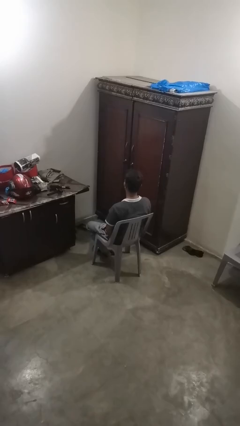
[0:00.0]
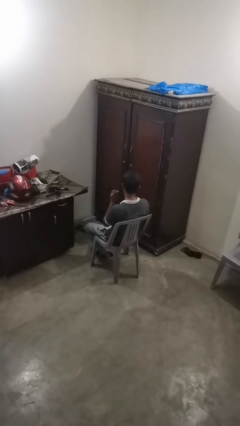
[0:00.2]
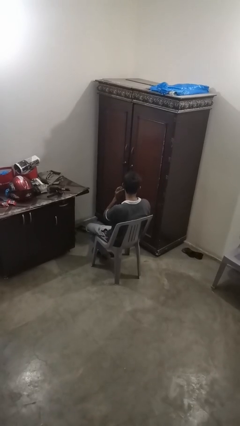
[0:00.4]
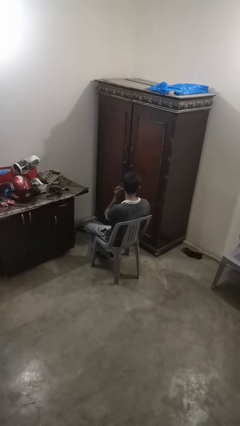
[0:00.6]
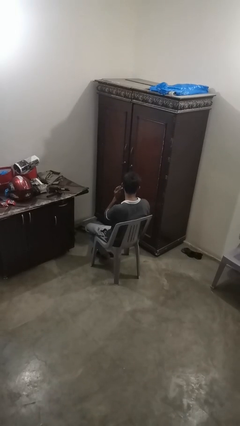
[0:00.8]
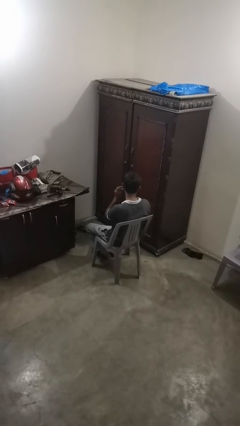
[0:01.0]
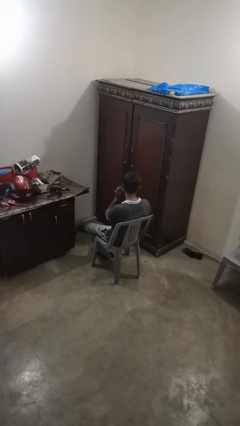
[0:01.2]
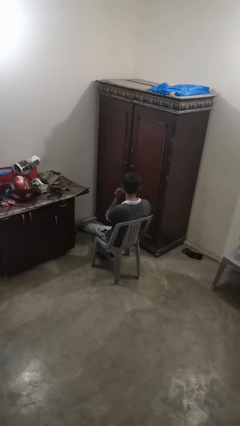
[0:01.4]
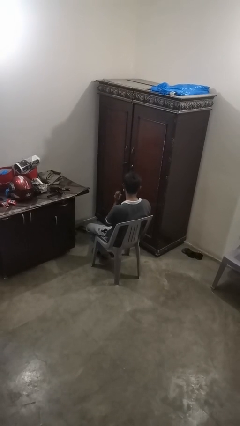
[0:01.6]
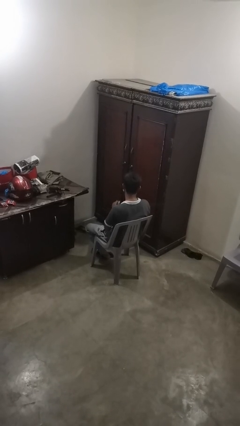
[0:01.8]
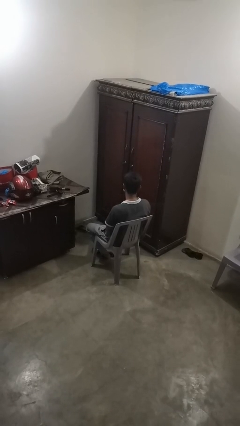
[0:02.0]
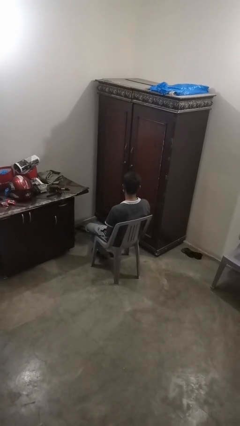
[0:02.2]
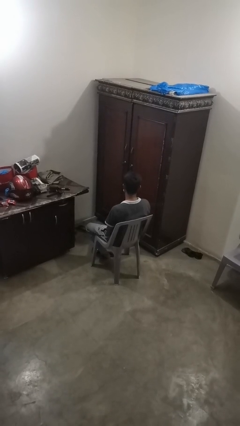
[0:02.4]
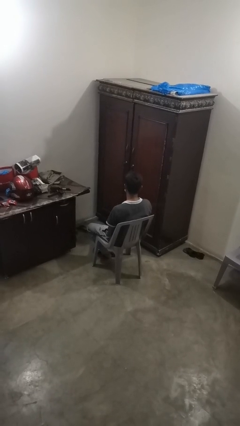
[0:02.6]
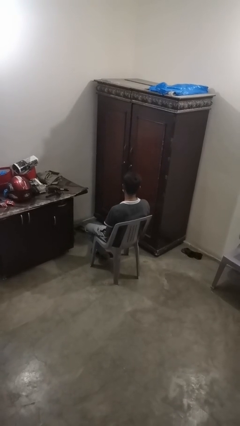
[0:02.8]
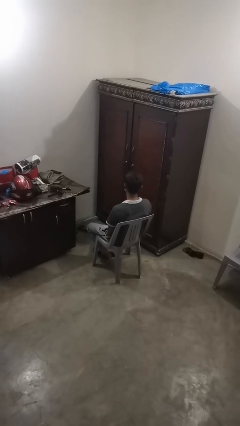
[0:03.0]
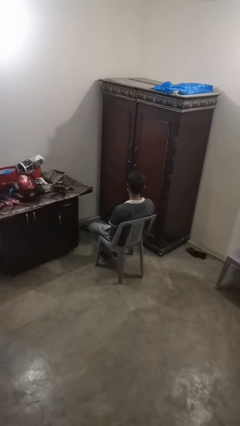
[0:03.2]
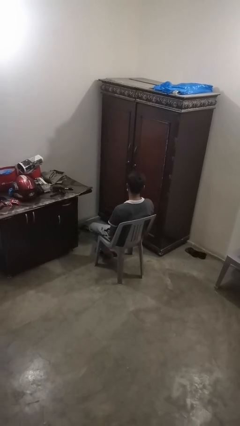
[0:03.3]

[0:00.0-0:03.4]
person puts on earrings

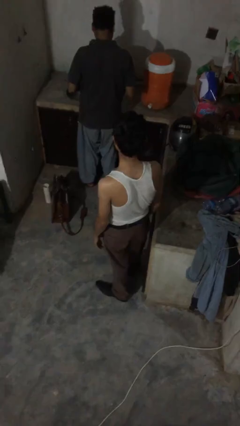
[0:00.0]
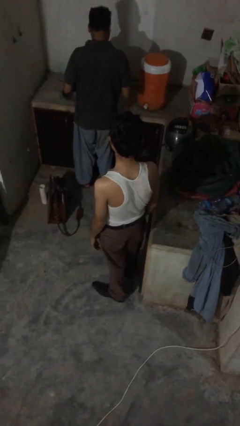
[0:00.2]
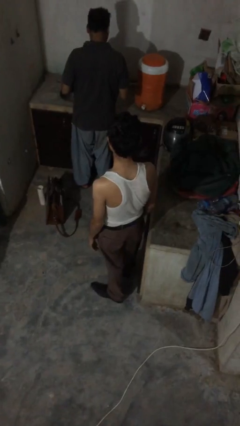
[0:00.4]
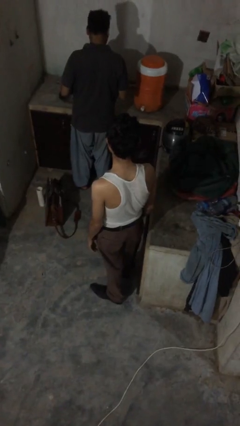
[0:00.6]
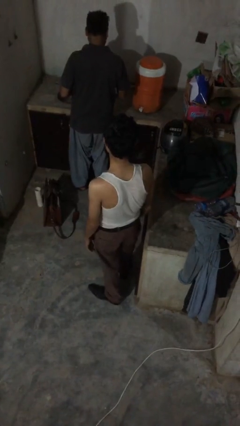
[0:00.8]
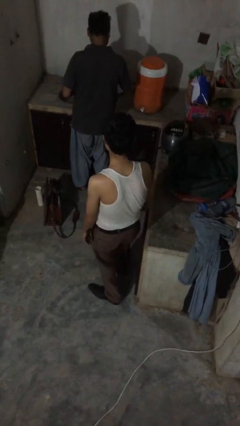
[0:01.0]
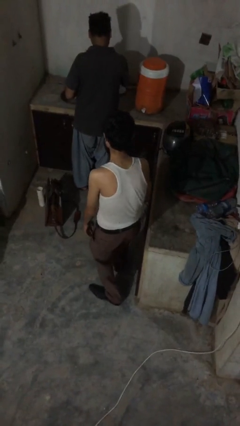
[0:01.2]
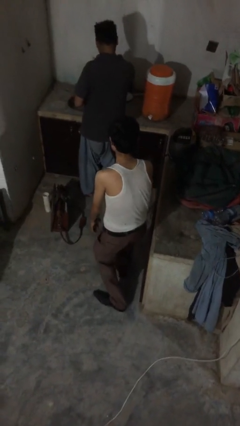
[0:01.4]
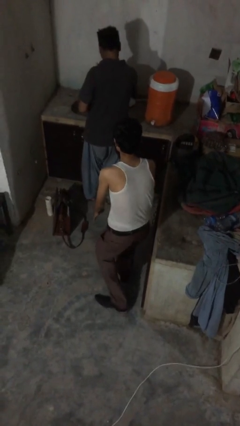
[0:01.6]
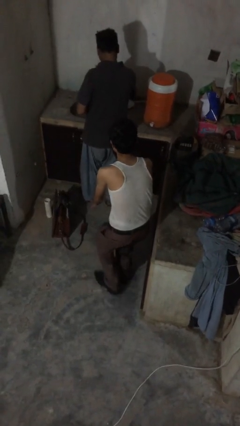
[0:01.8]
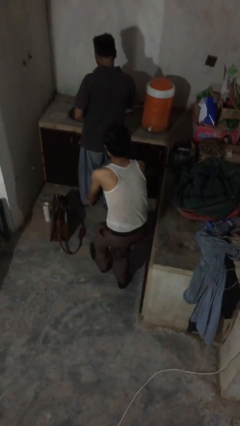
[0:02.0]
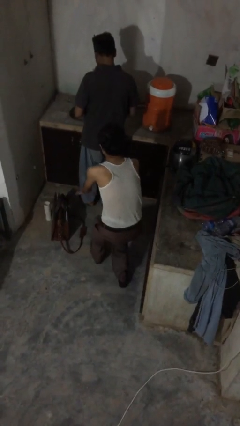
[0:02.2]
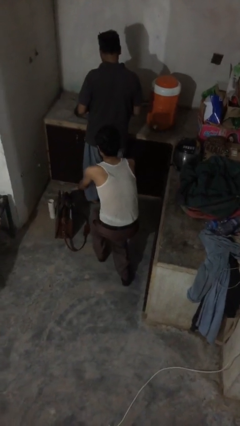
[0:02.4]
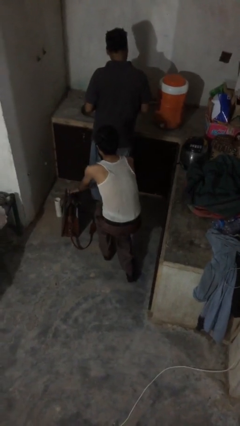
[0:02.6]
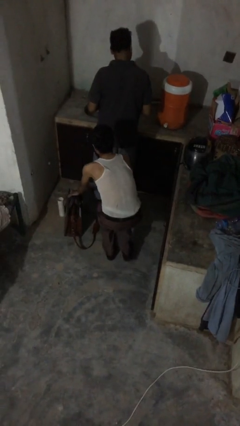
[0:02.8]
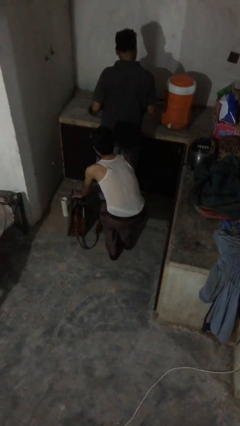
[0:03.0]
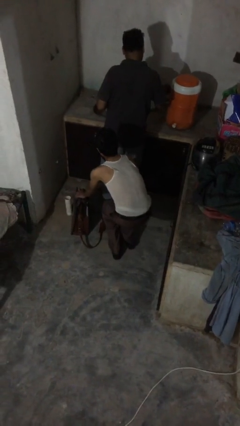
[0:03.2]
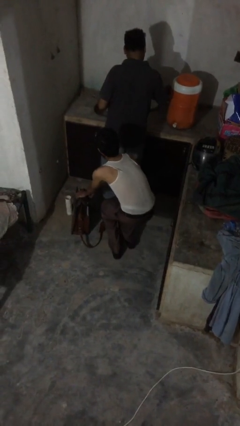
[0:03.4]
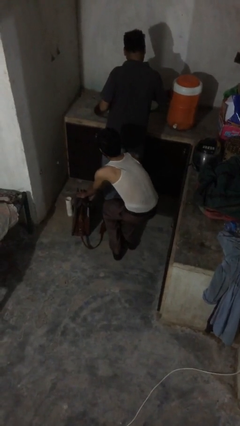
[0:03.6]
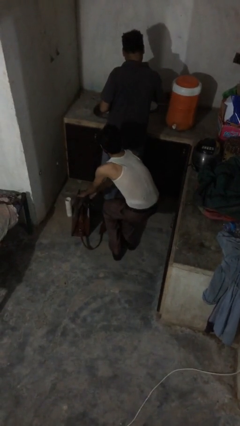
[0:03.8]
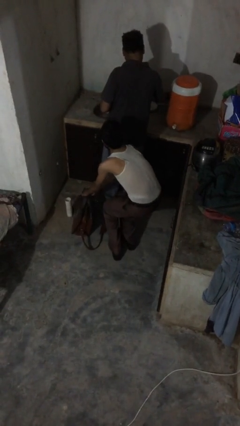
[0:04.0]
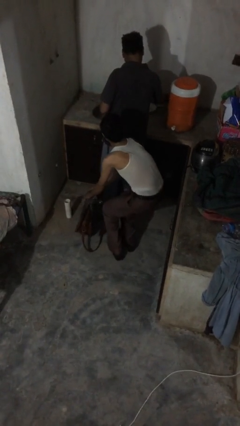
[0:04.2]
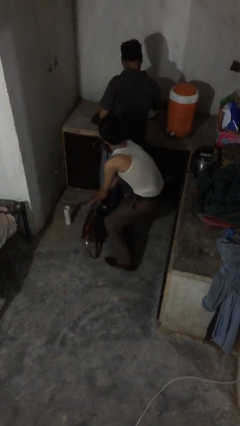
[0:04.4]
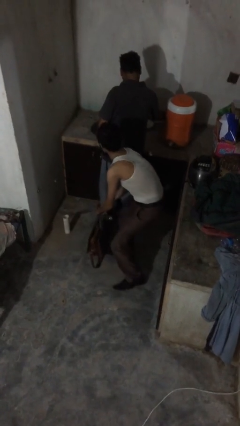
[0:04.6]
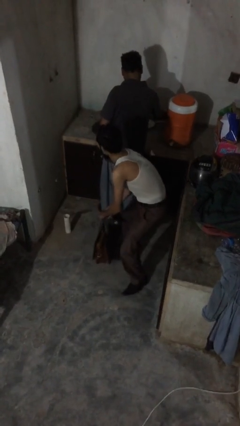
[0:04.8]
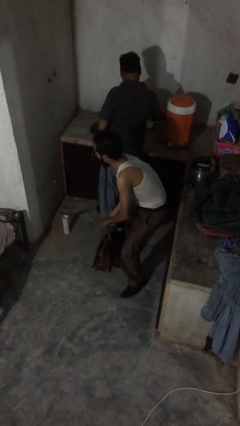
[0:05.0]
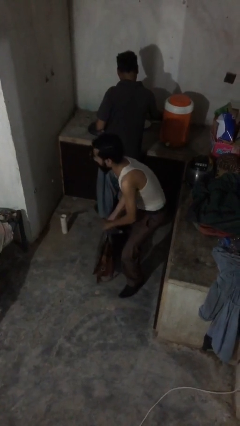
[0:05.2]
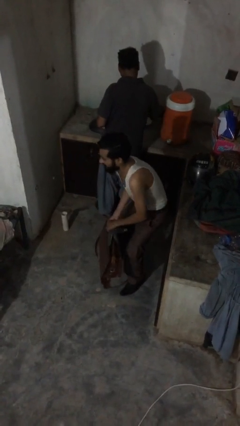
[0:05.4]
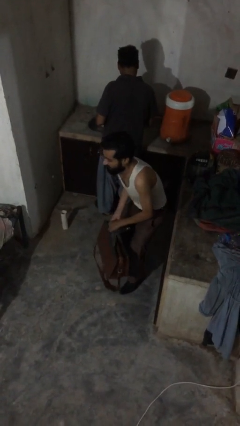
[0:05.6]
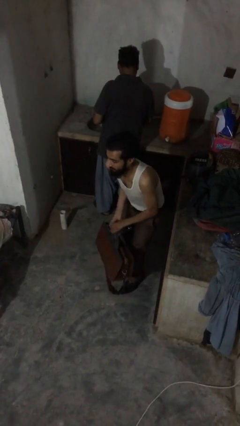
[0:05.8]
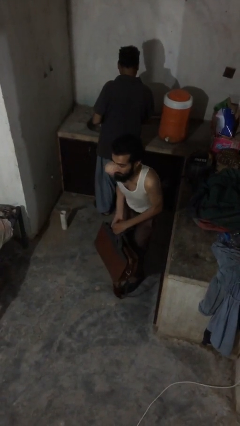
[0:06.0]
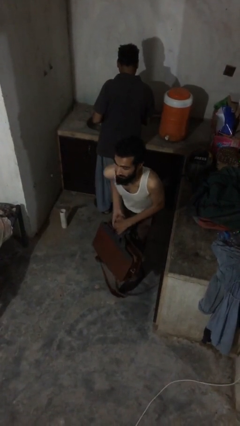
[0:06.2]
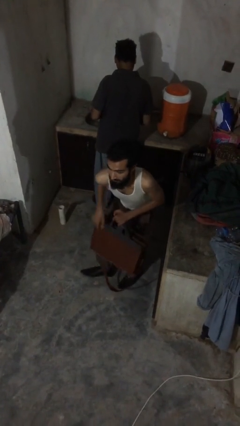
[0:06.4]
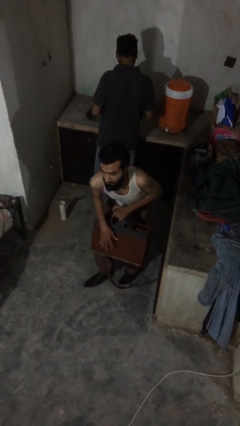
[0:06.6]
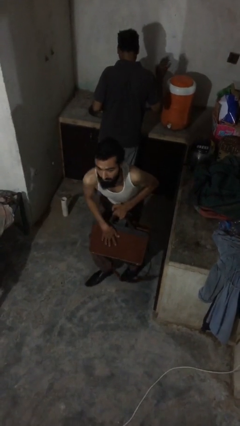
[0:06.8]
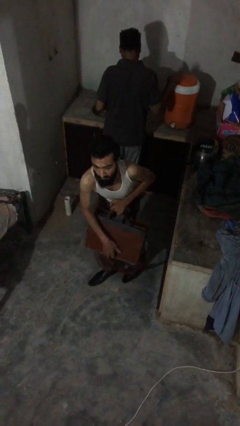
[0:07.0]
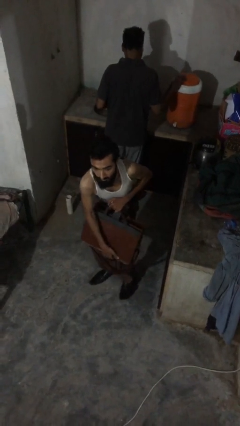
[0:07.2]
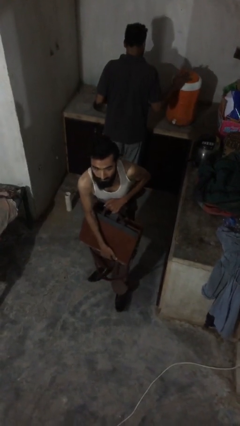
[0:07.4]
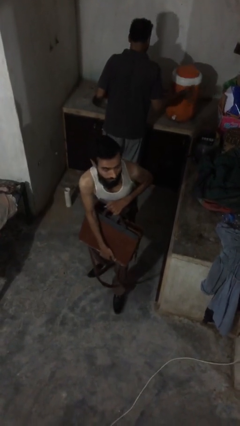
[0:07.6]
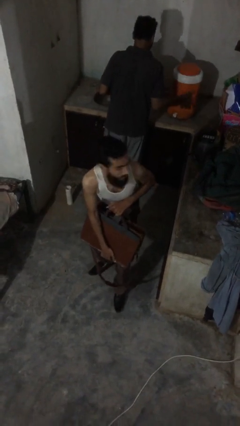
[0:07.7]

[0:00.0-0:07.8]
person steals object from person

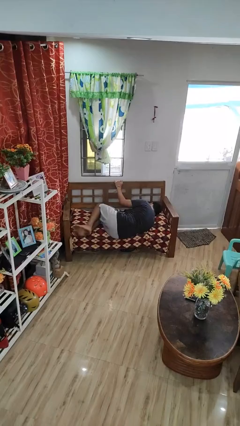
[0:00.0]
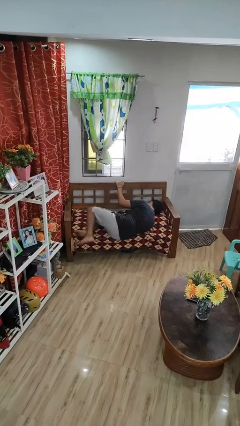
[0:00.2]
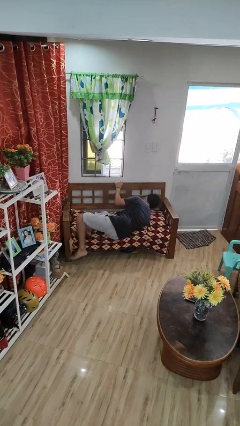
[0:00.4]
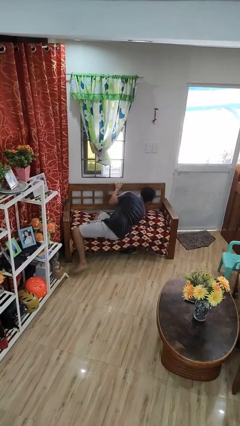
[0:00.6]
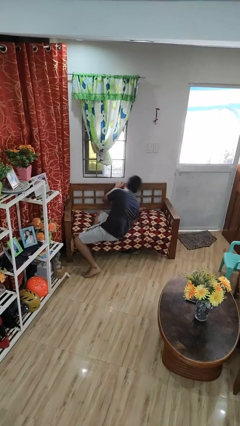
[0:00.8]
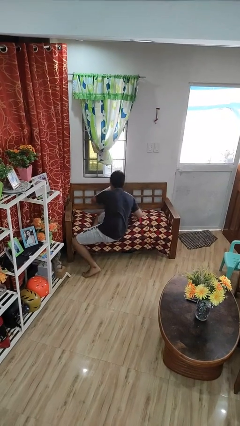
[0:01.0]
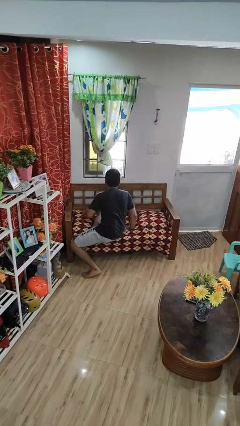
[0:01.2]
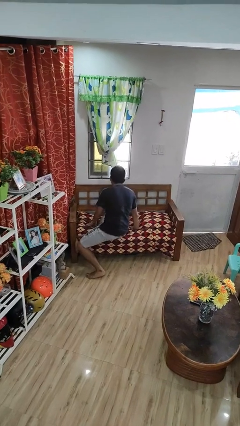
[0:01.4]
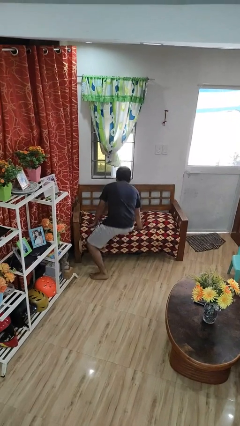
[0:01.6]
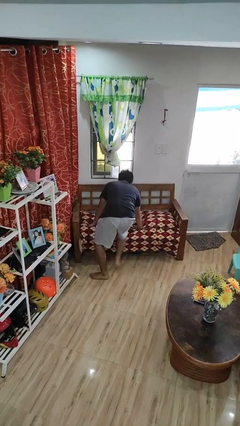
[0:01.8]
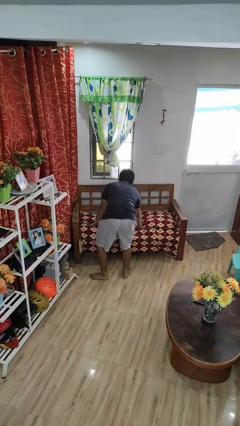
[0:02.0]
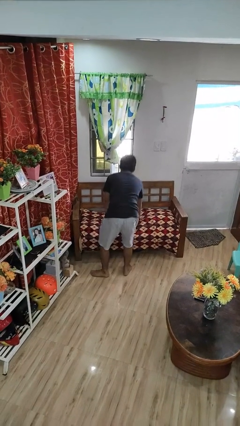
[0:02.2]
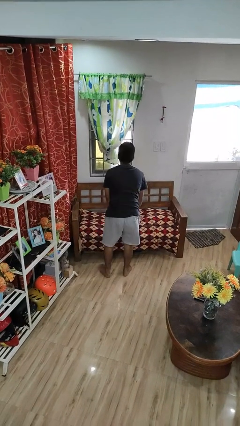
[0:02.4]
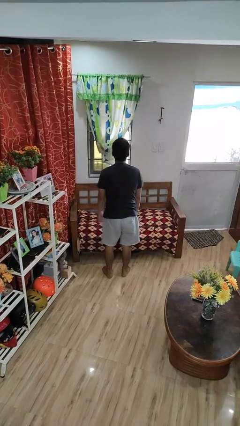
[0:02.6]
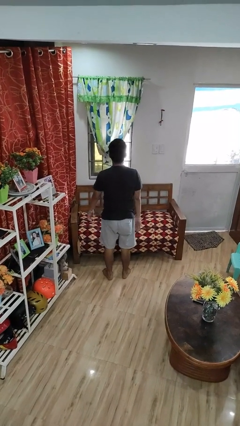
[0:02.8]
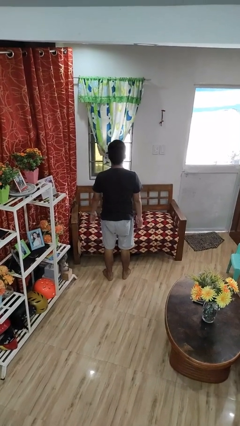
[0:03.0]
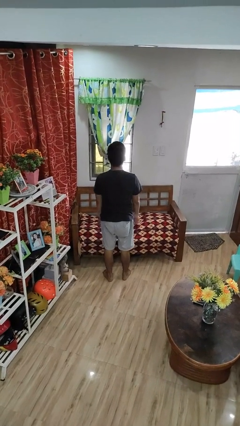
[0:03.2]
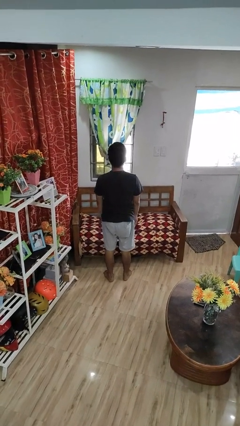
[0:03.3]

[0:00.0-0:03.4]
person stands up

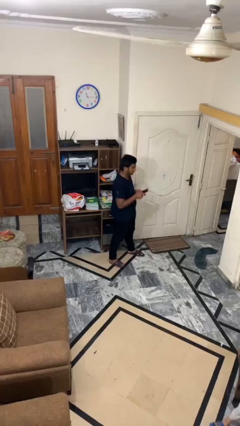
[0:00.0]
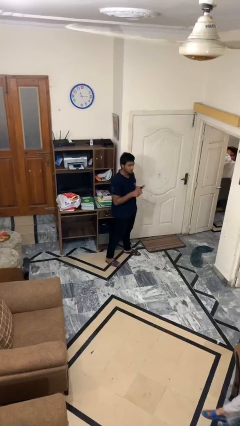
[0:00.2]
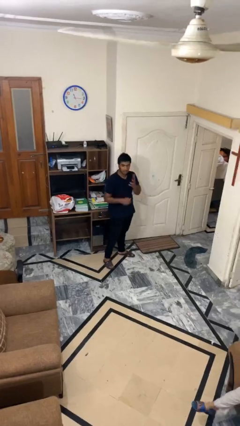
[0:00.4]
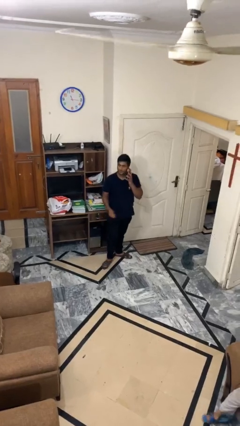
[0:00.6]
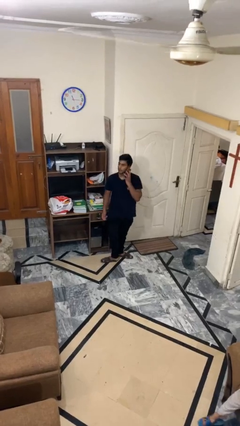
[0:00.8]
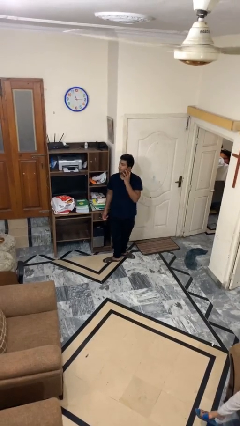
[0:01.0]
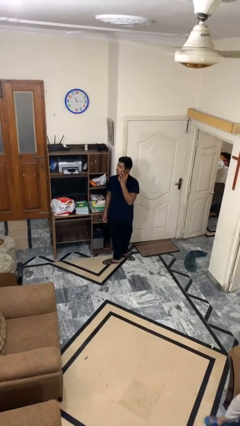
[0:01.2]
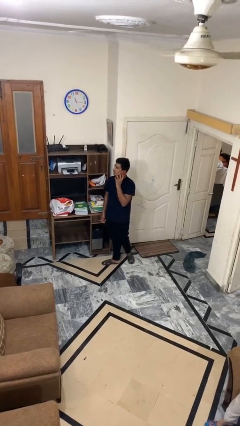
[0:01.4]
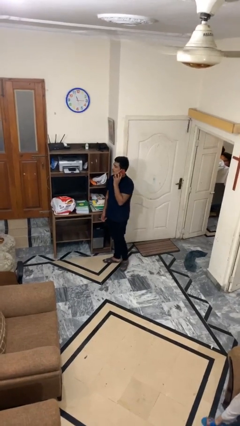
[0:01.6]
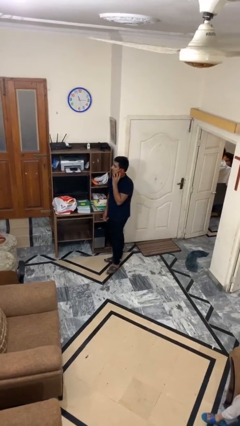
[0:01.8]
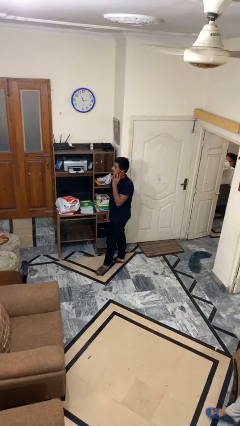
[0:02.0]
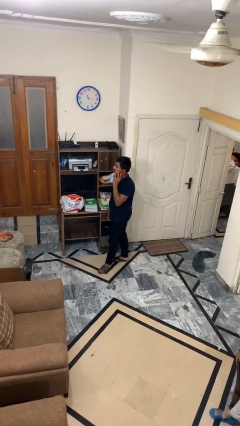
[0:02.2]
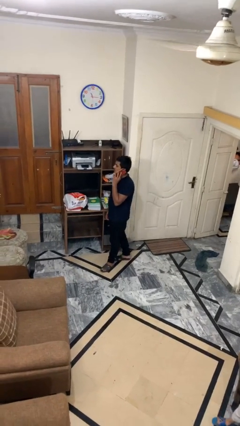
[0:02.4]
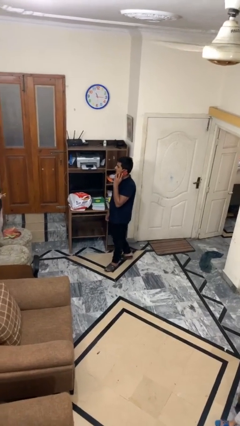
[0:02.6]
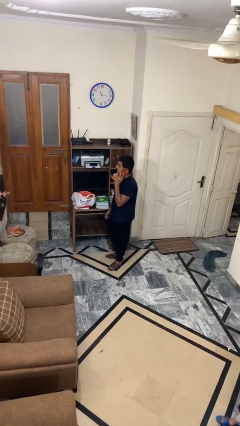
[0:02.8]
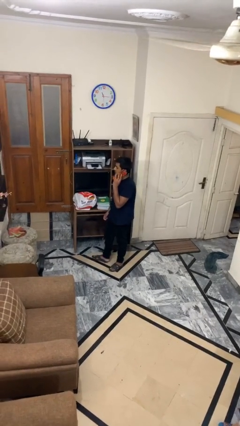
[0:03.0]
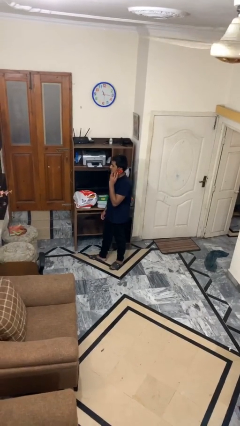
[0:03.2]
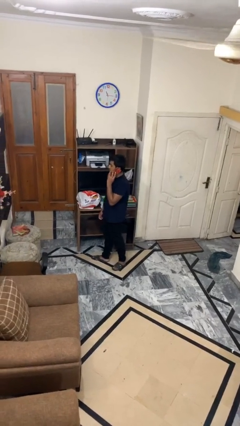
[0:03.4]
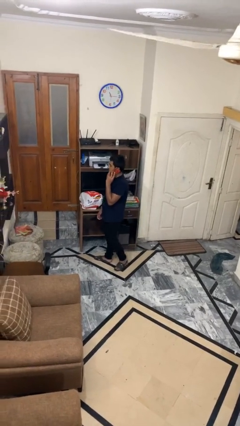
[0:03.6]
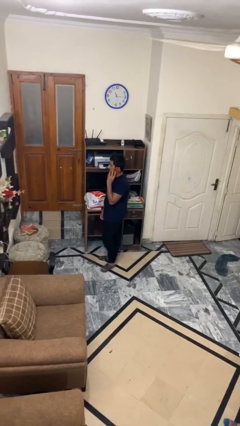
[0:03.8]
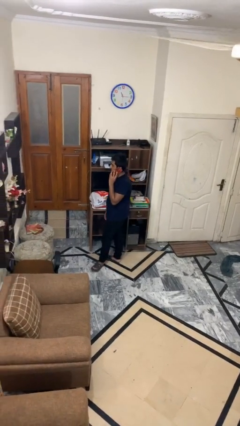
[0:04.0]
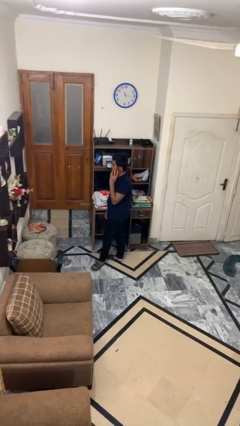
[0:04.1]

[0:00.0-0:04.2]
person talks on phone
